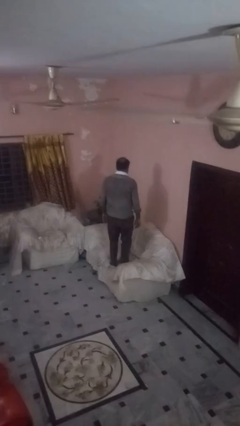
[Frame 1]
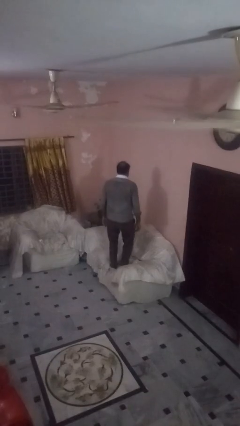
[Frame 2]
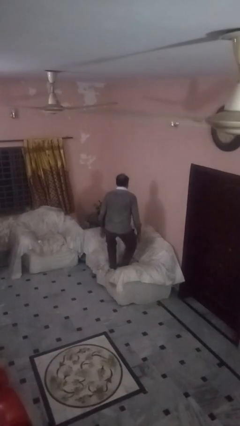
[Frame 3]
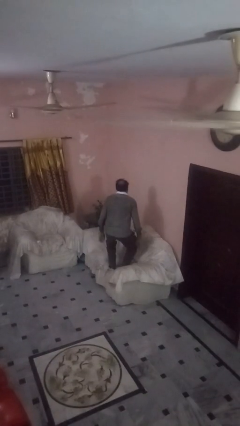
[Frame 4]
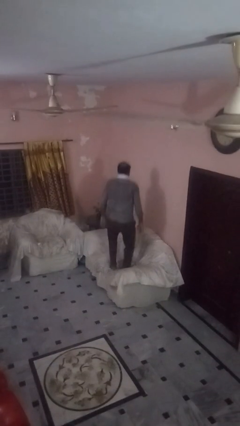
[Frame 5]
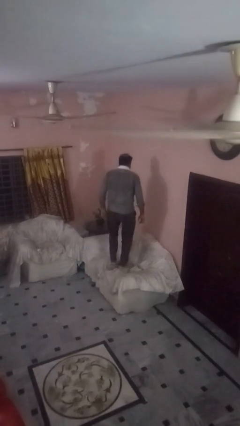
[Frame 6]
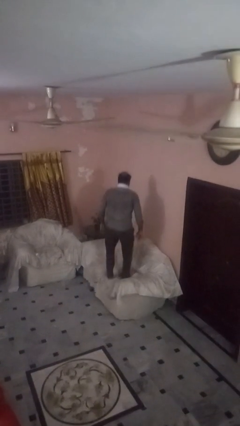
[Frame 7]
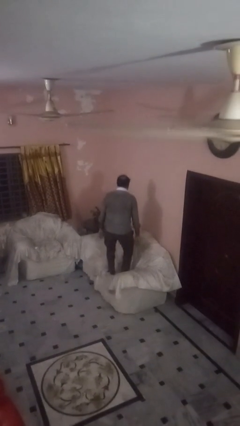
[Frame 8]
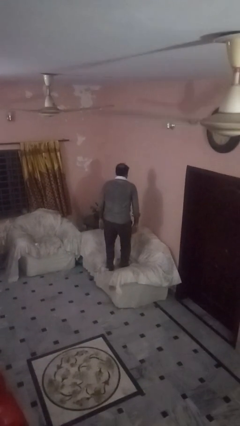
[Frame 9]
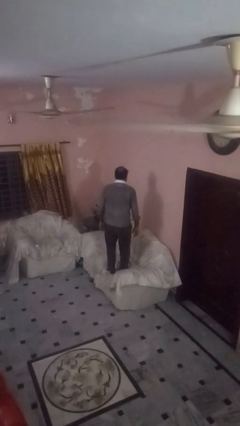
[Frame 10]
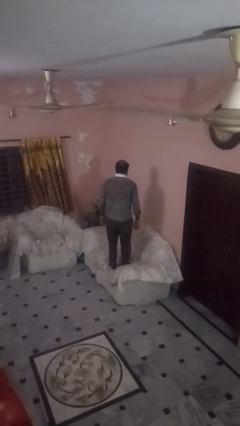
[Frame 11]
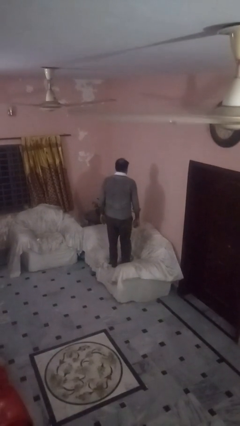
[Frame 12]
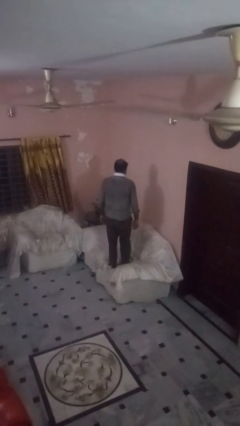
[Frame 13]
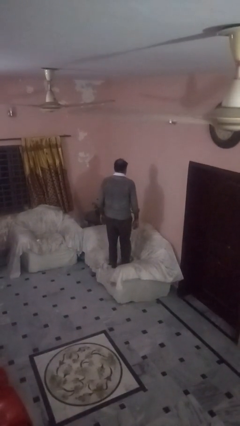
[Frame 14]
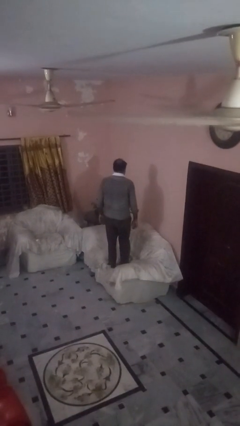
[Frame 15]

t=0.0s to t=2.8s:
person jumps on couch

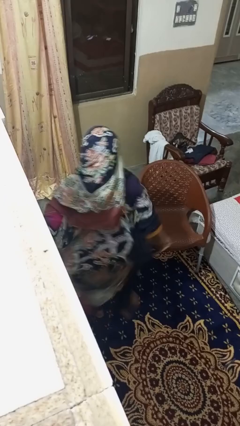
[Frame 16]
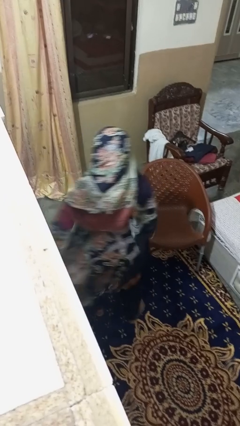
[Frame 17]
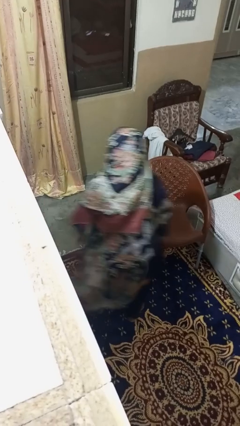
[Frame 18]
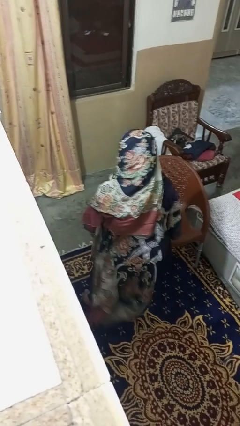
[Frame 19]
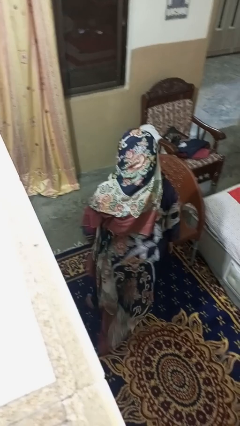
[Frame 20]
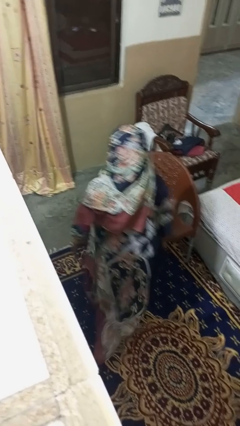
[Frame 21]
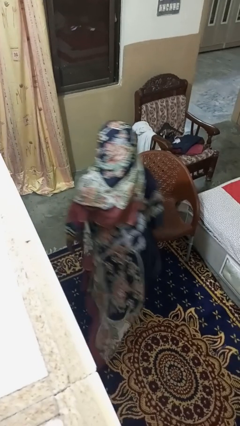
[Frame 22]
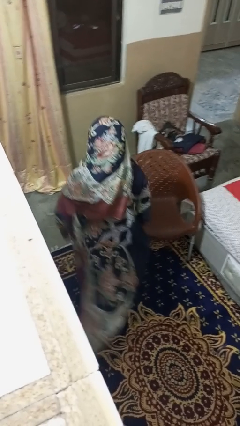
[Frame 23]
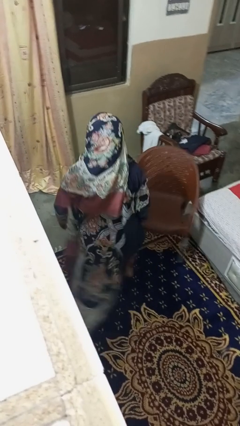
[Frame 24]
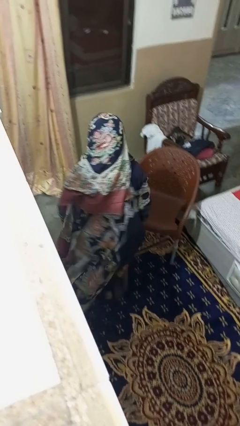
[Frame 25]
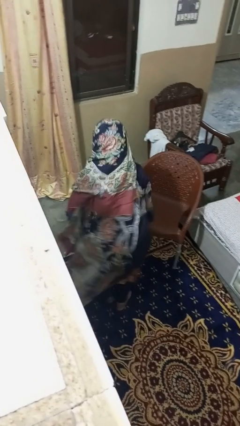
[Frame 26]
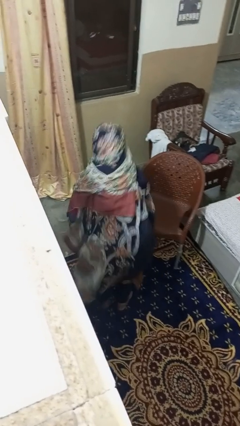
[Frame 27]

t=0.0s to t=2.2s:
person trips on object on floor

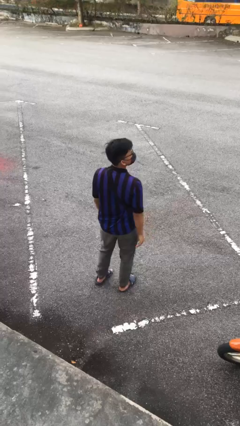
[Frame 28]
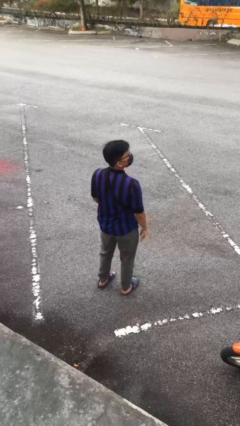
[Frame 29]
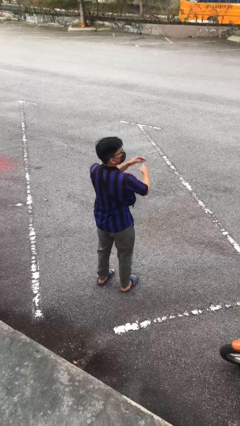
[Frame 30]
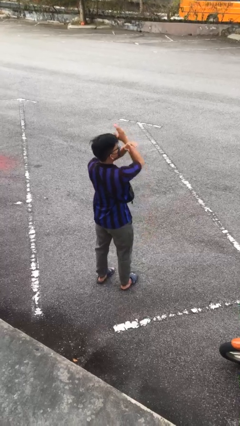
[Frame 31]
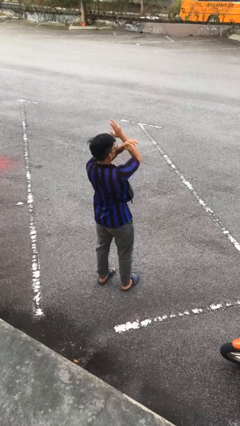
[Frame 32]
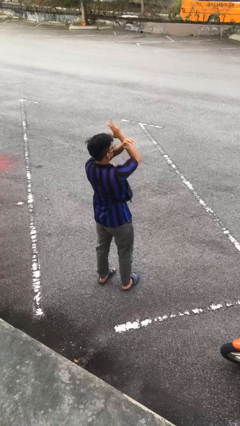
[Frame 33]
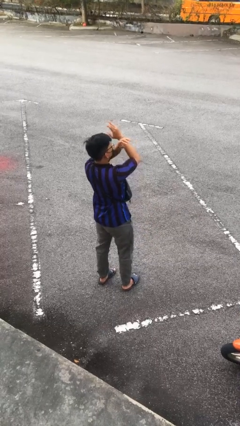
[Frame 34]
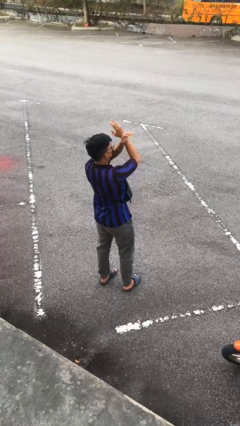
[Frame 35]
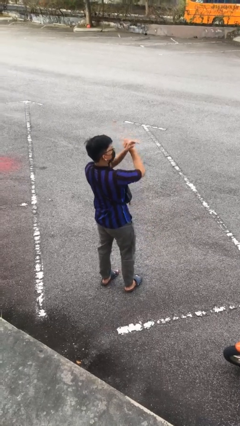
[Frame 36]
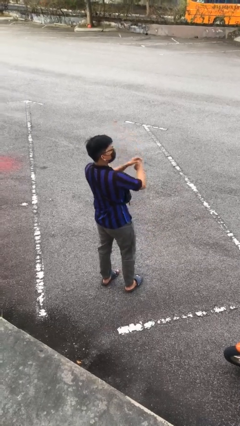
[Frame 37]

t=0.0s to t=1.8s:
person gestures arms x

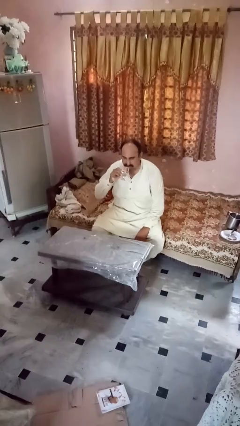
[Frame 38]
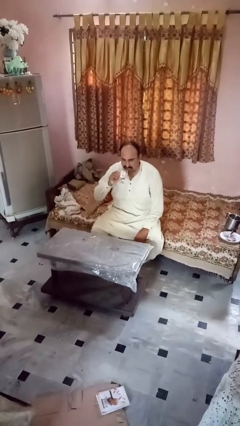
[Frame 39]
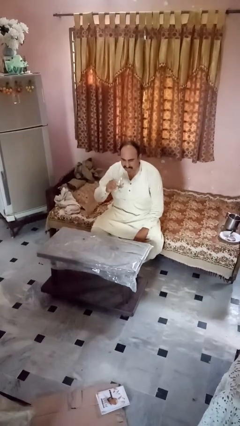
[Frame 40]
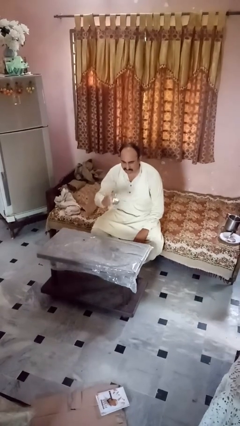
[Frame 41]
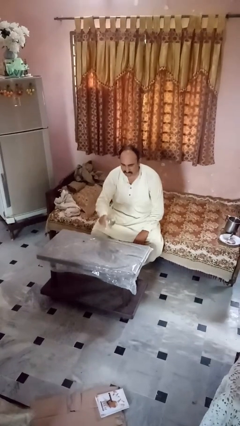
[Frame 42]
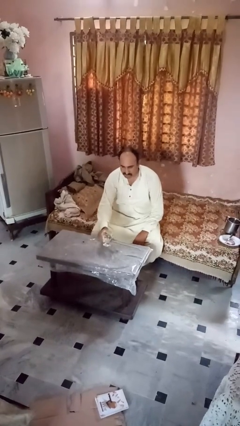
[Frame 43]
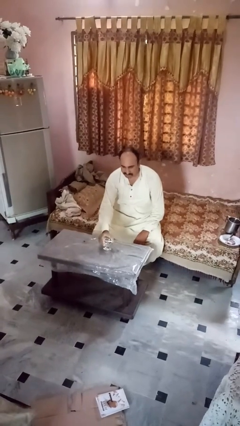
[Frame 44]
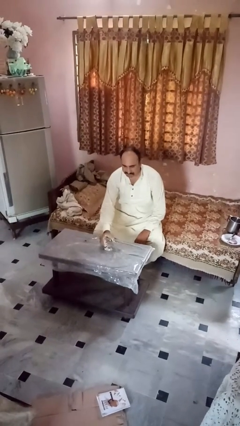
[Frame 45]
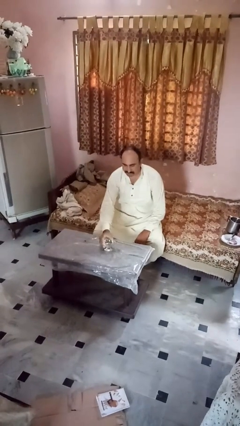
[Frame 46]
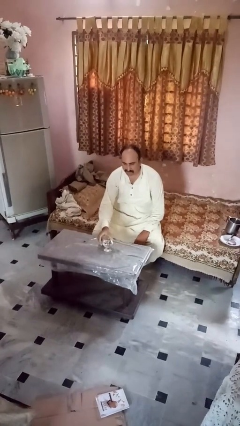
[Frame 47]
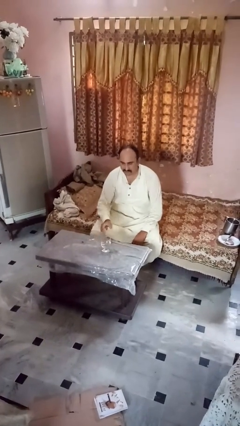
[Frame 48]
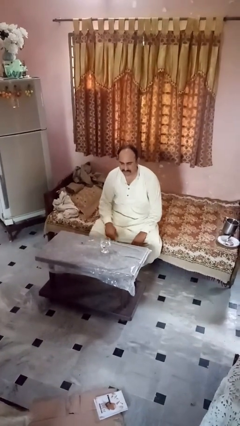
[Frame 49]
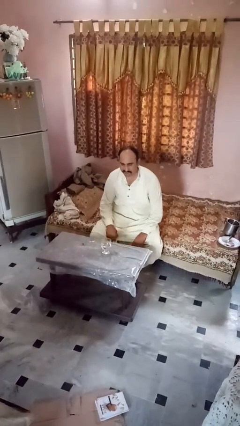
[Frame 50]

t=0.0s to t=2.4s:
person puts down object on table

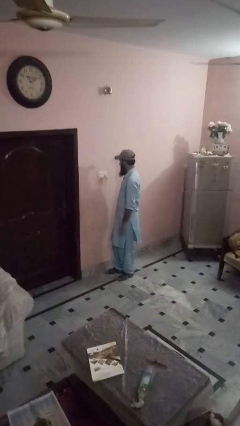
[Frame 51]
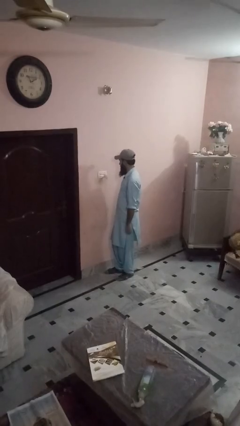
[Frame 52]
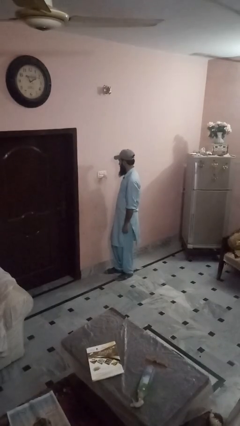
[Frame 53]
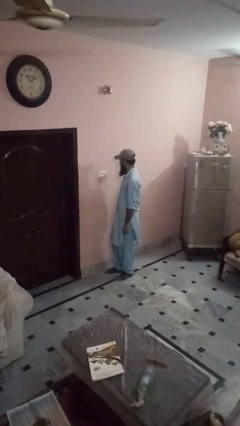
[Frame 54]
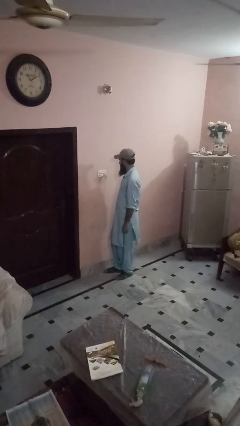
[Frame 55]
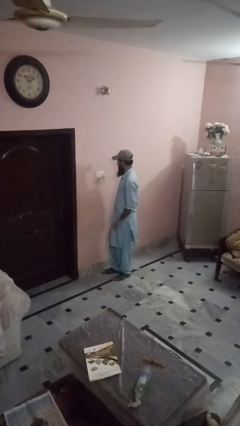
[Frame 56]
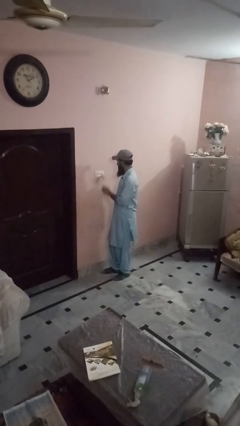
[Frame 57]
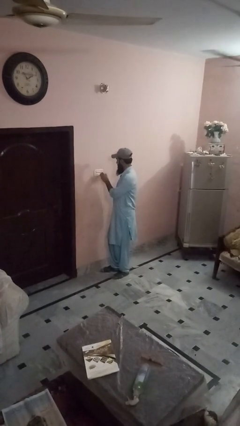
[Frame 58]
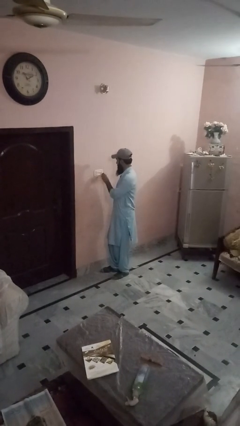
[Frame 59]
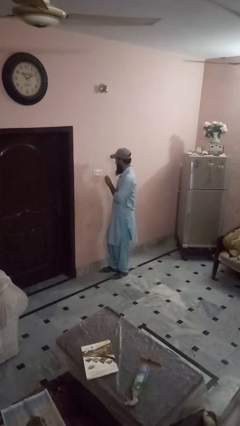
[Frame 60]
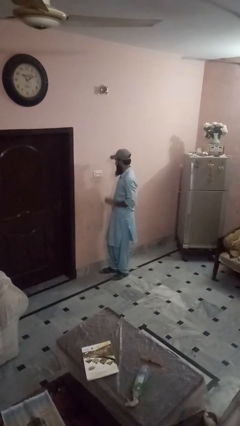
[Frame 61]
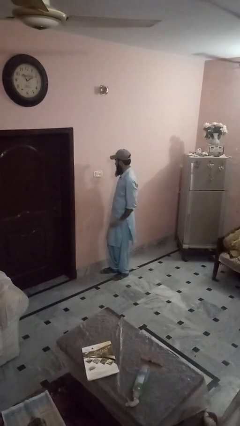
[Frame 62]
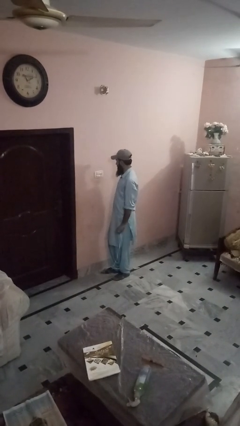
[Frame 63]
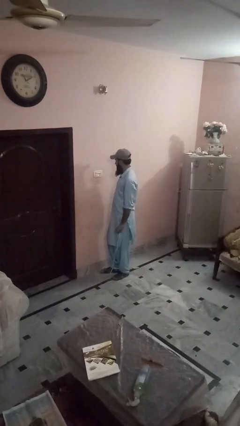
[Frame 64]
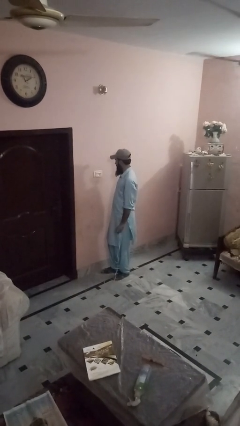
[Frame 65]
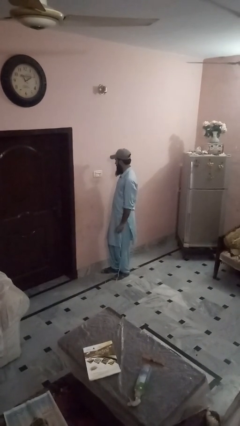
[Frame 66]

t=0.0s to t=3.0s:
person unplugs from electrical socket

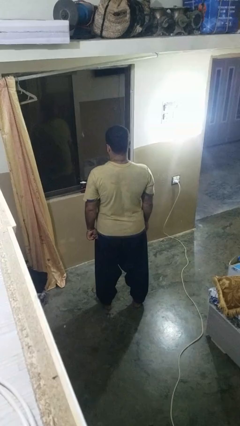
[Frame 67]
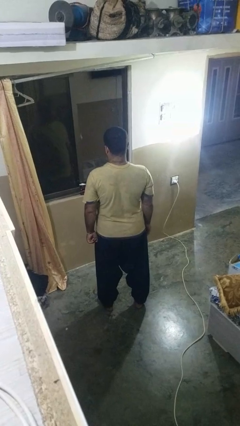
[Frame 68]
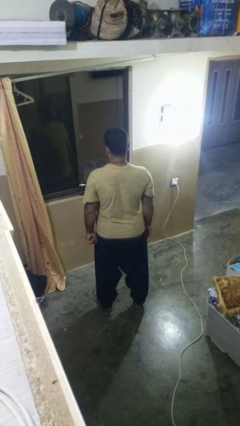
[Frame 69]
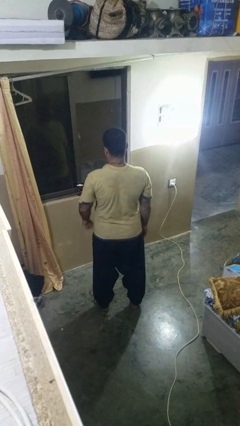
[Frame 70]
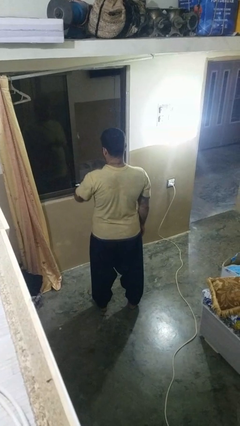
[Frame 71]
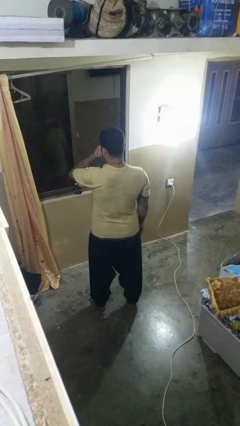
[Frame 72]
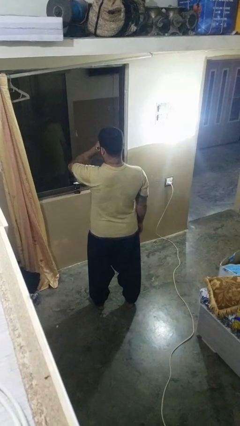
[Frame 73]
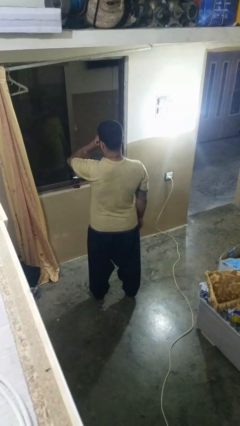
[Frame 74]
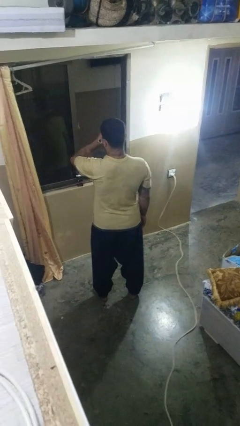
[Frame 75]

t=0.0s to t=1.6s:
person looks at wristwatch

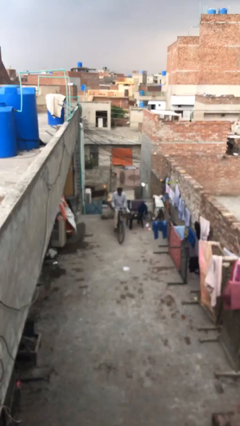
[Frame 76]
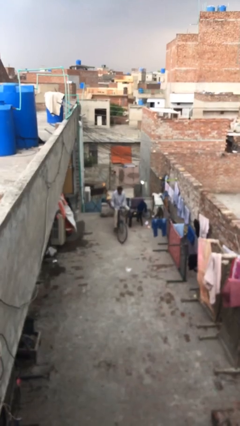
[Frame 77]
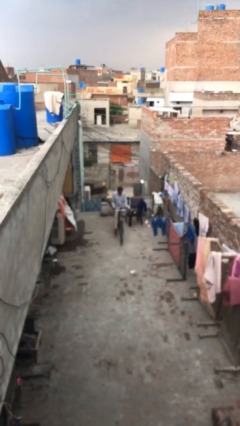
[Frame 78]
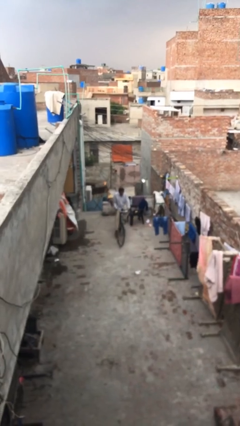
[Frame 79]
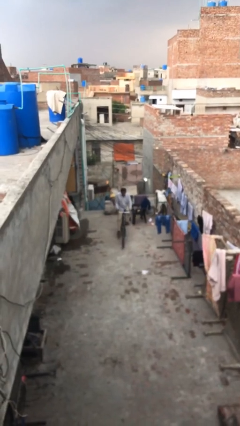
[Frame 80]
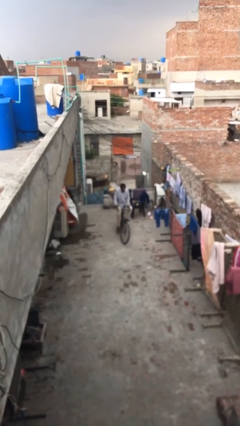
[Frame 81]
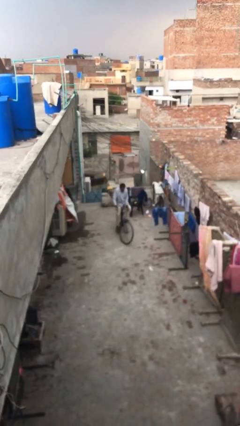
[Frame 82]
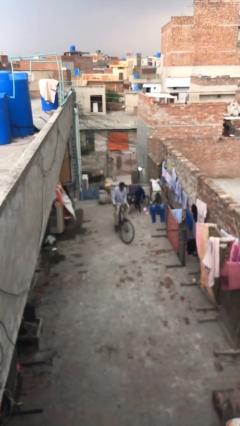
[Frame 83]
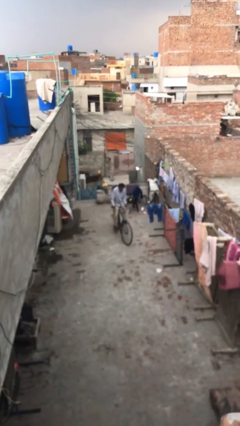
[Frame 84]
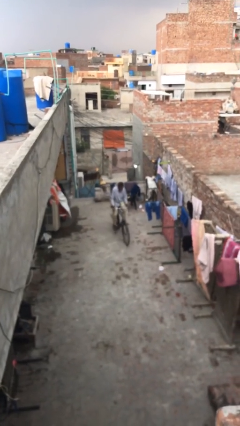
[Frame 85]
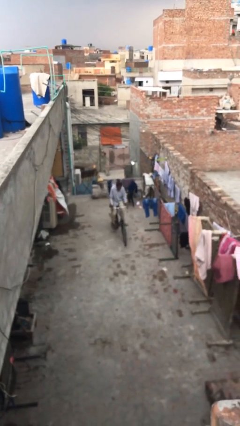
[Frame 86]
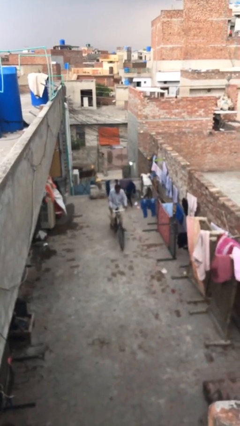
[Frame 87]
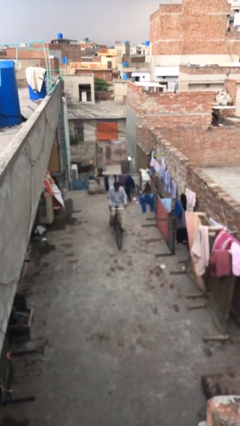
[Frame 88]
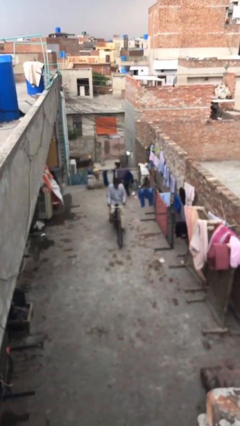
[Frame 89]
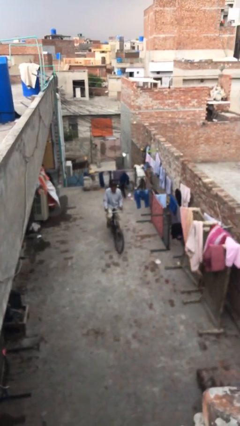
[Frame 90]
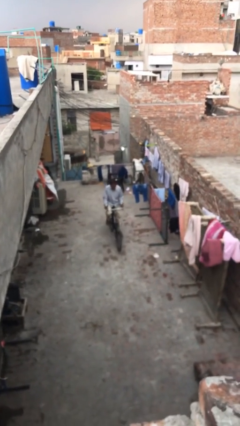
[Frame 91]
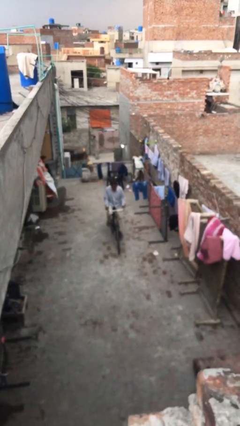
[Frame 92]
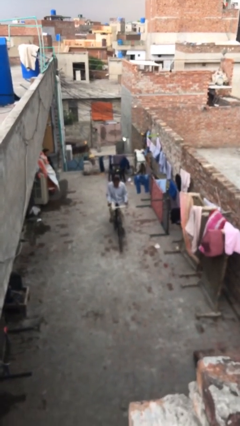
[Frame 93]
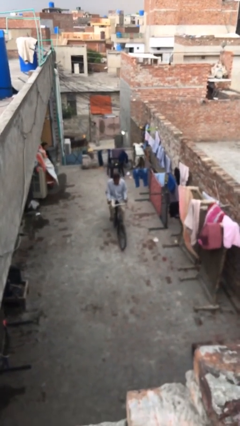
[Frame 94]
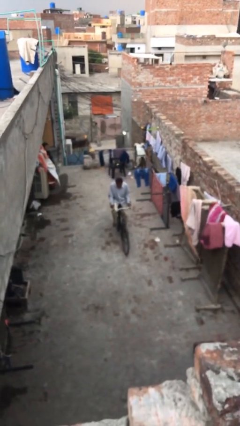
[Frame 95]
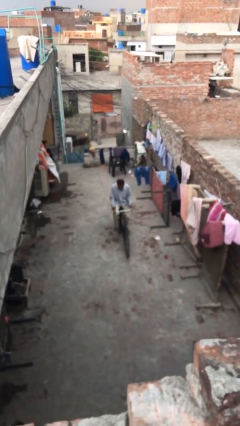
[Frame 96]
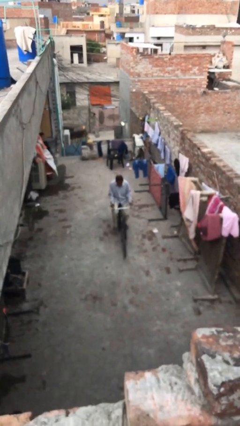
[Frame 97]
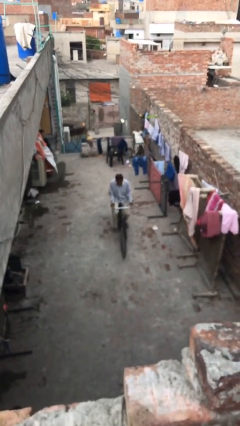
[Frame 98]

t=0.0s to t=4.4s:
person rides bicycle
